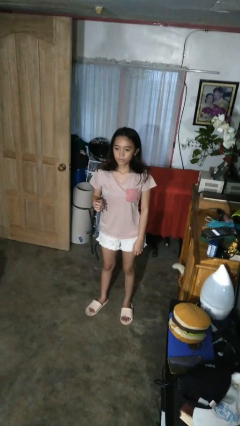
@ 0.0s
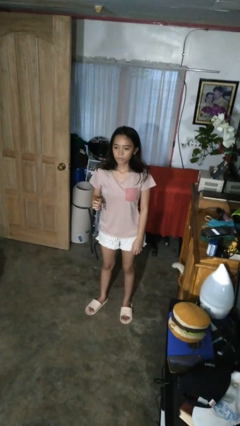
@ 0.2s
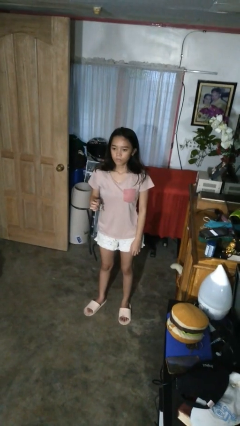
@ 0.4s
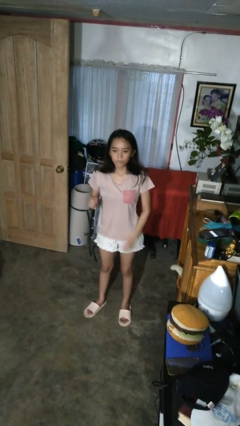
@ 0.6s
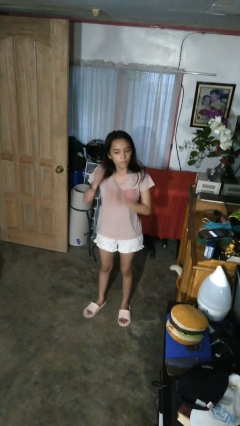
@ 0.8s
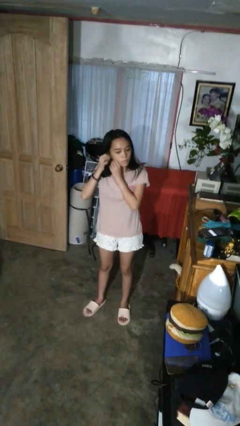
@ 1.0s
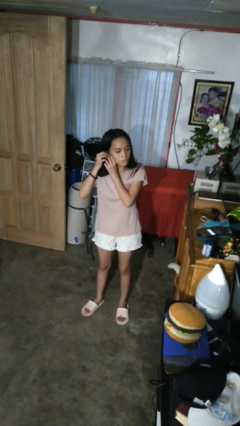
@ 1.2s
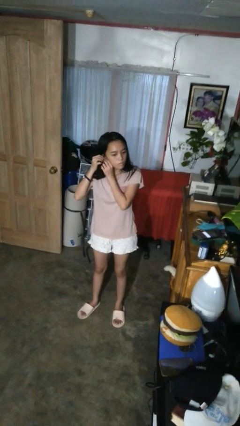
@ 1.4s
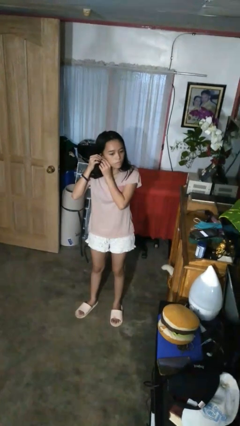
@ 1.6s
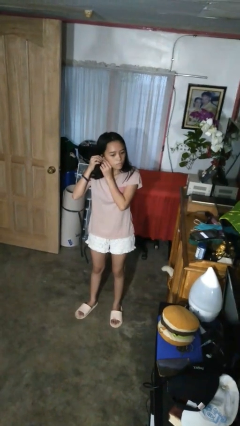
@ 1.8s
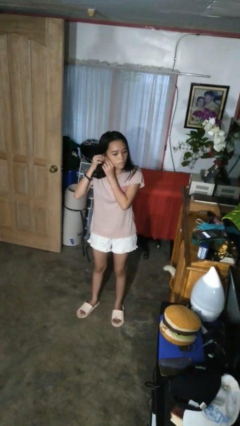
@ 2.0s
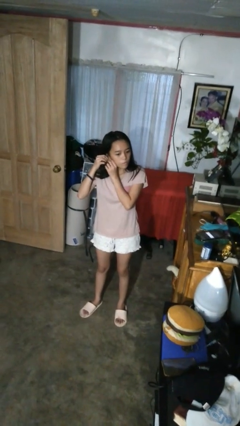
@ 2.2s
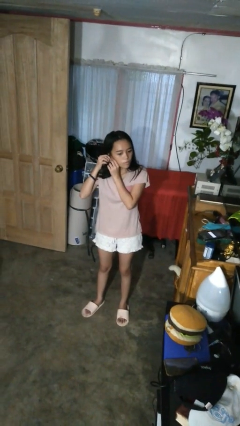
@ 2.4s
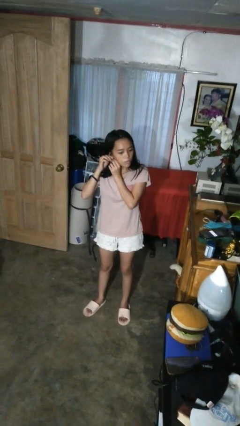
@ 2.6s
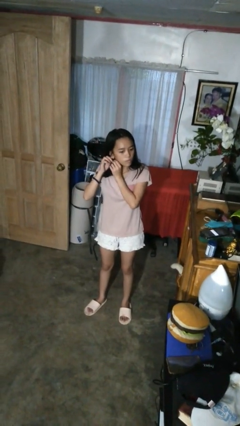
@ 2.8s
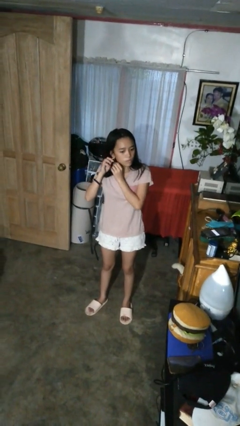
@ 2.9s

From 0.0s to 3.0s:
person puts on earrings

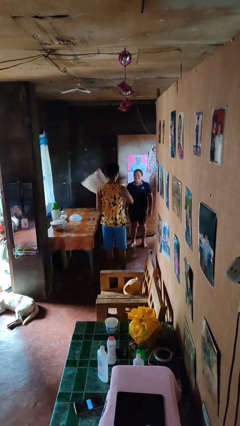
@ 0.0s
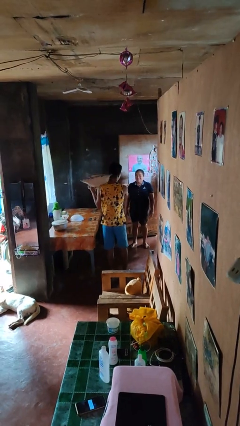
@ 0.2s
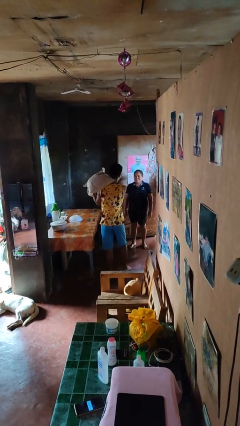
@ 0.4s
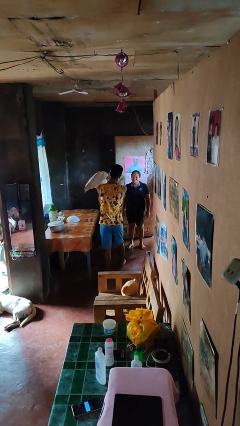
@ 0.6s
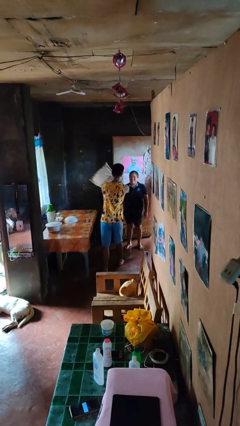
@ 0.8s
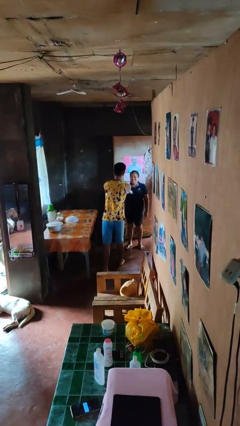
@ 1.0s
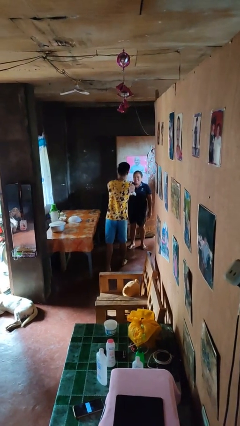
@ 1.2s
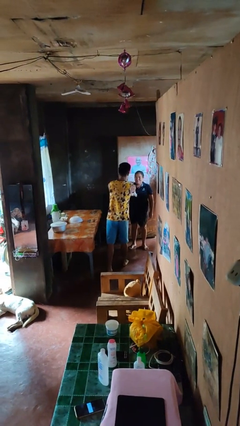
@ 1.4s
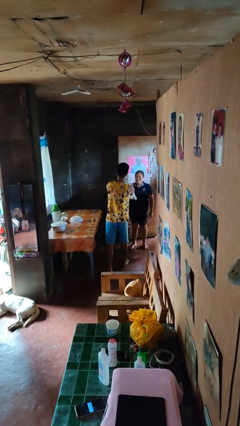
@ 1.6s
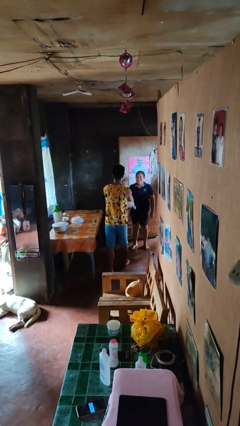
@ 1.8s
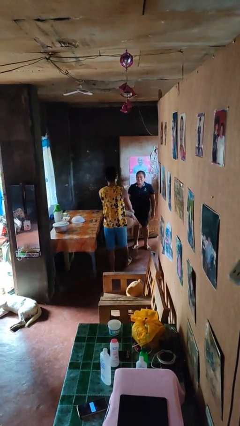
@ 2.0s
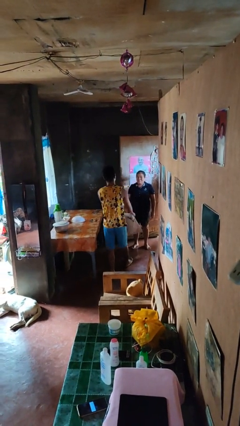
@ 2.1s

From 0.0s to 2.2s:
person hits person with pillow

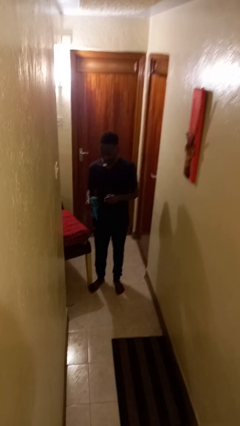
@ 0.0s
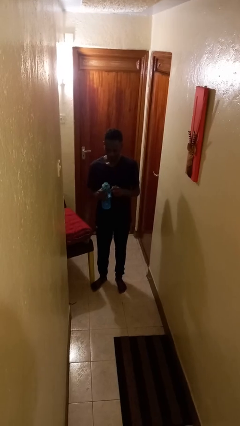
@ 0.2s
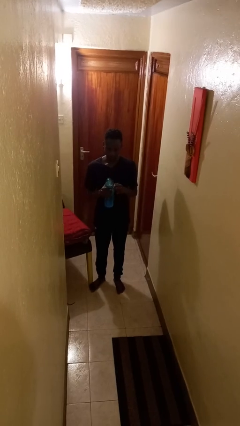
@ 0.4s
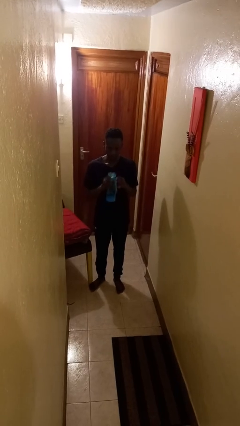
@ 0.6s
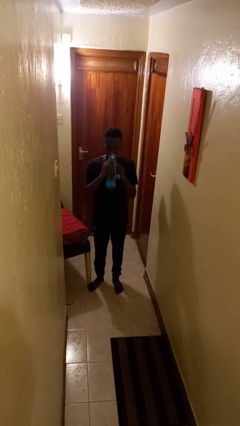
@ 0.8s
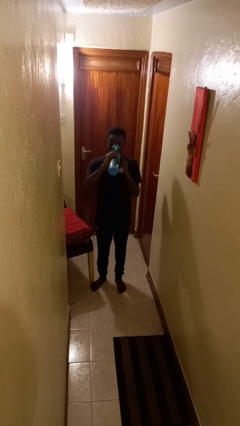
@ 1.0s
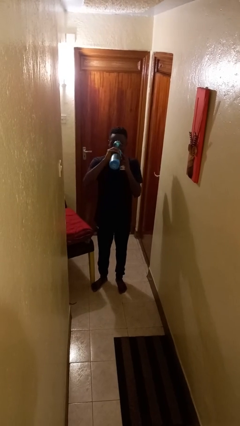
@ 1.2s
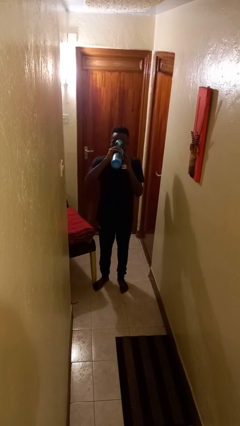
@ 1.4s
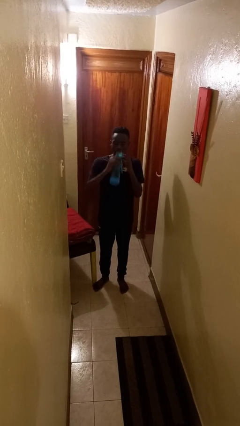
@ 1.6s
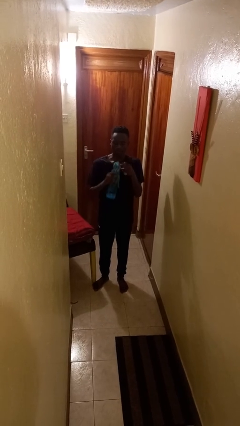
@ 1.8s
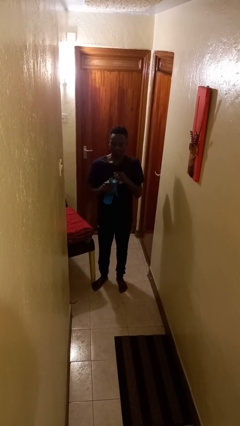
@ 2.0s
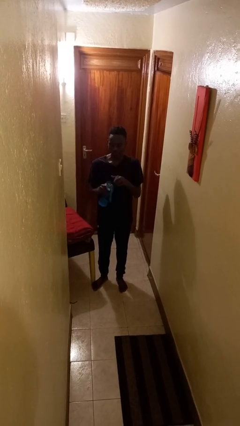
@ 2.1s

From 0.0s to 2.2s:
person drinks from cup

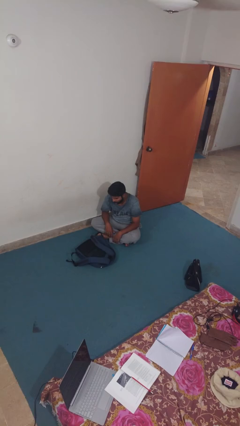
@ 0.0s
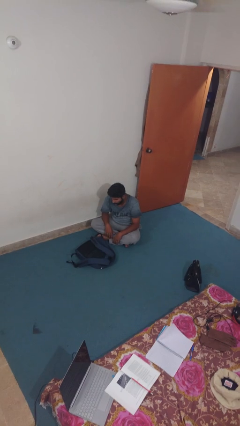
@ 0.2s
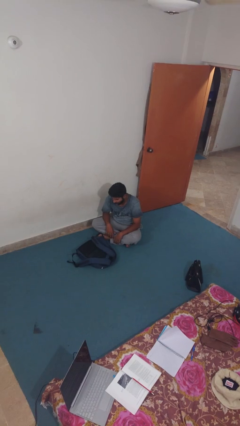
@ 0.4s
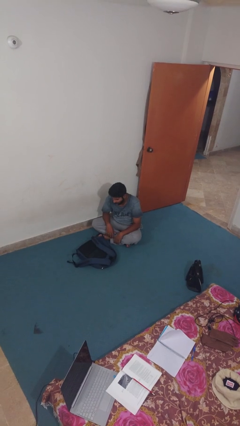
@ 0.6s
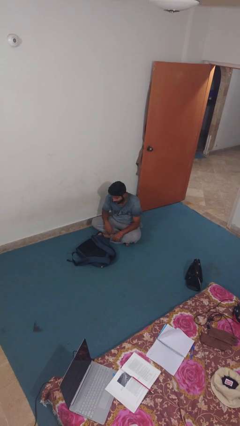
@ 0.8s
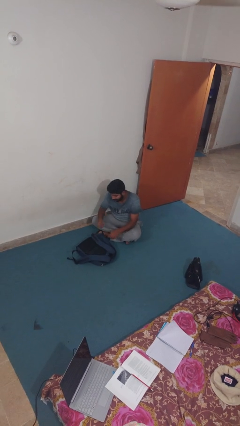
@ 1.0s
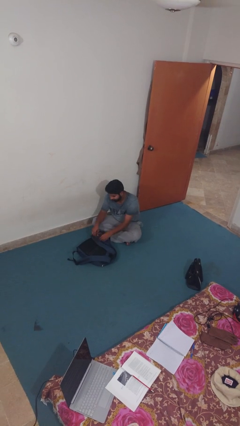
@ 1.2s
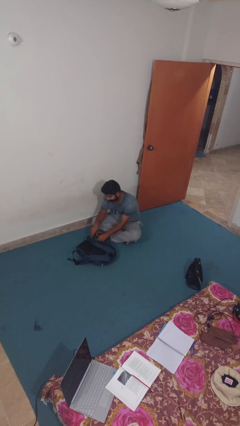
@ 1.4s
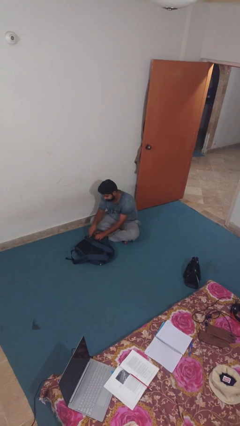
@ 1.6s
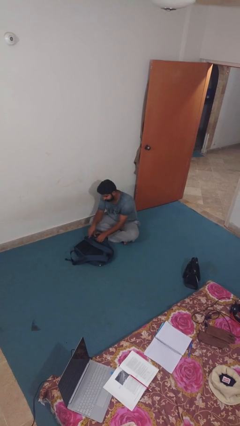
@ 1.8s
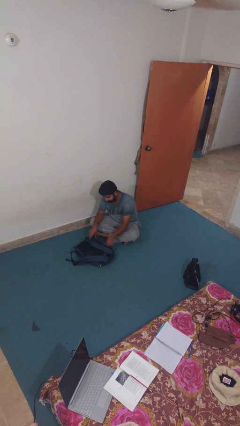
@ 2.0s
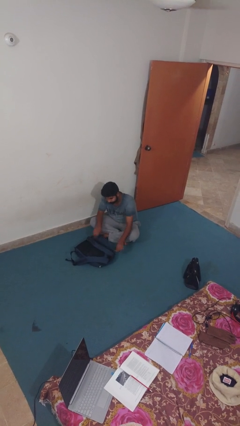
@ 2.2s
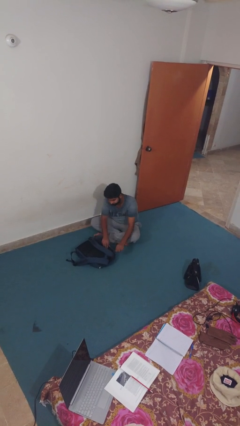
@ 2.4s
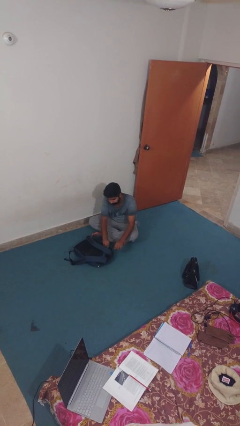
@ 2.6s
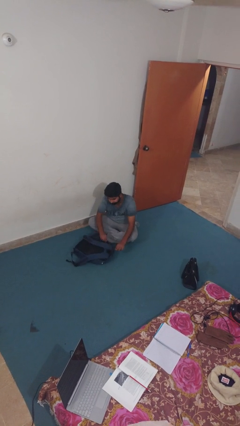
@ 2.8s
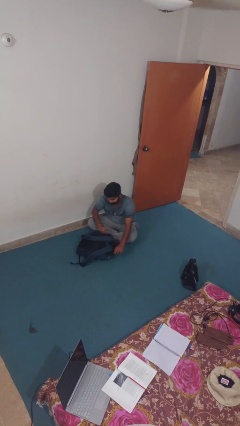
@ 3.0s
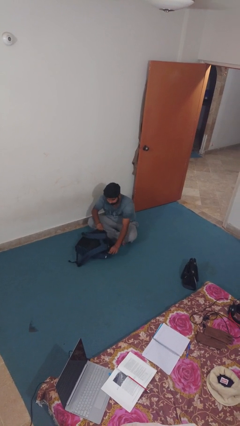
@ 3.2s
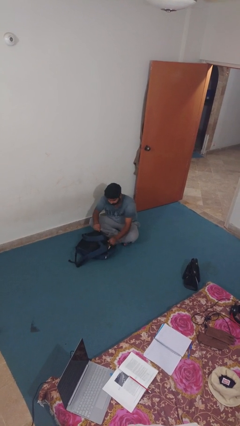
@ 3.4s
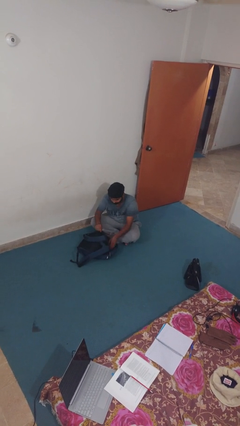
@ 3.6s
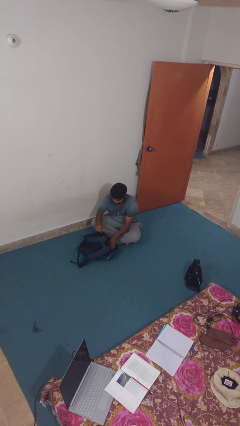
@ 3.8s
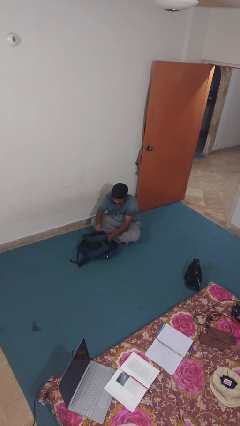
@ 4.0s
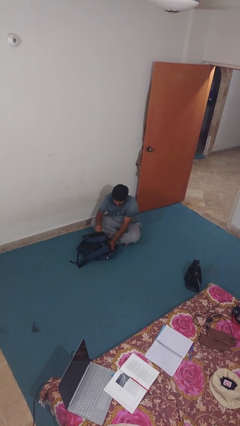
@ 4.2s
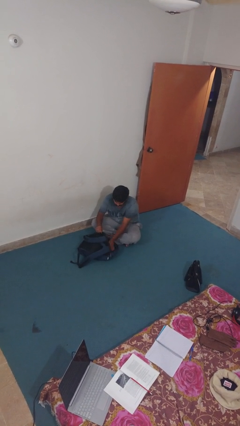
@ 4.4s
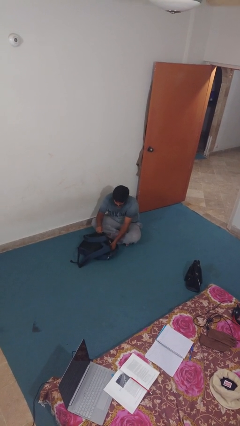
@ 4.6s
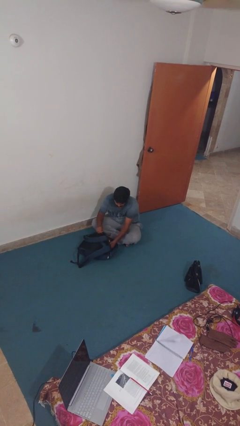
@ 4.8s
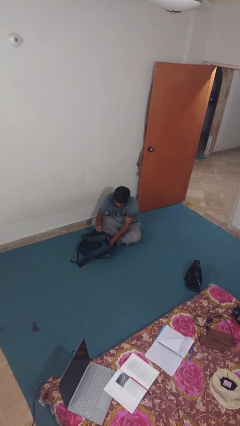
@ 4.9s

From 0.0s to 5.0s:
person searches in backpack

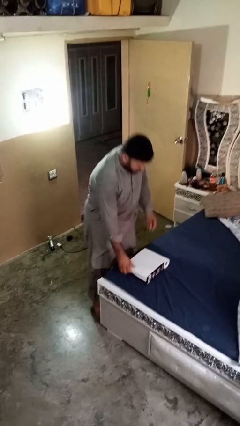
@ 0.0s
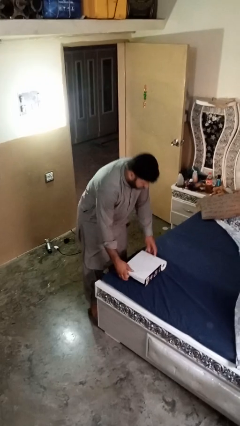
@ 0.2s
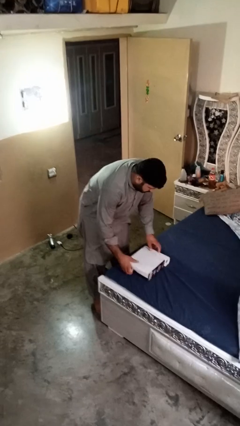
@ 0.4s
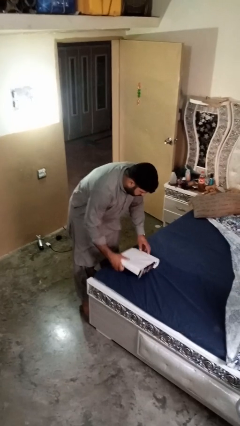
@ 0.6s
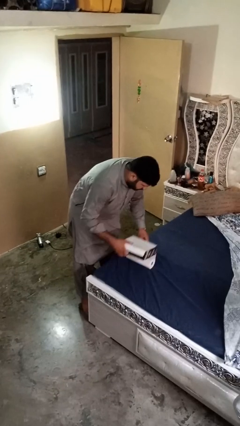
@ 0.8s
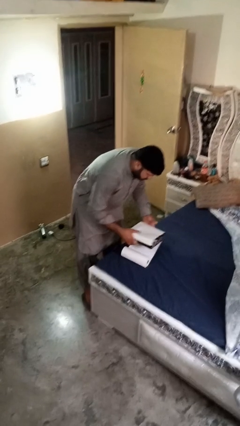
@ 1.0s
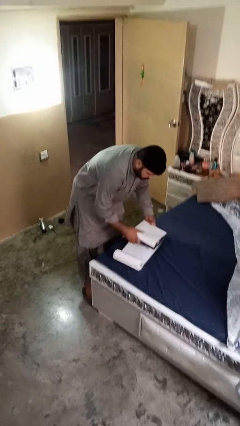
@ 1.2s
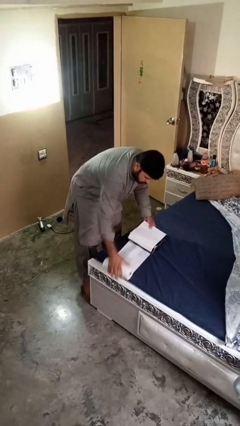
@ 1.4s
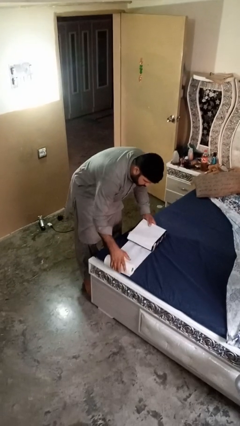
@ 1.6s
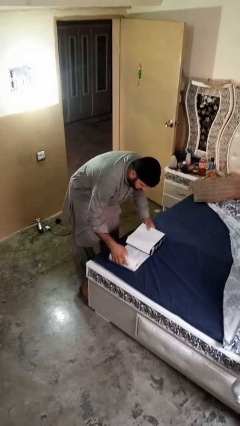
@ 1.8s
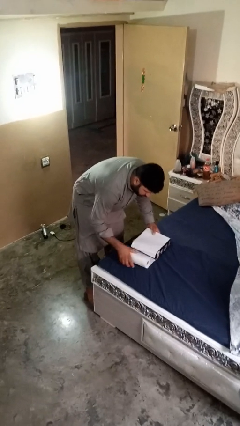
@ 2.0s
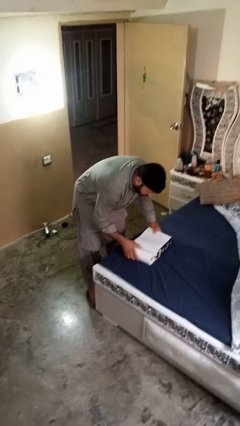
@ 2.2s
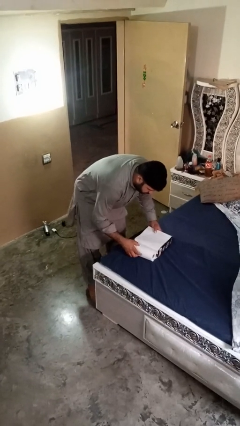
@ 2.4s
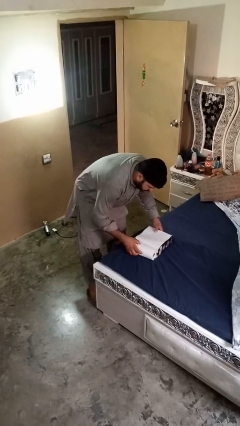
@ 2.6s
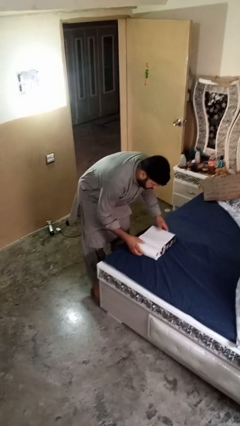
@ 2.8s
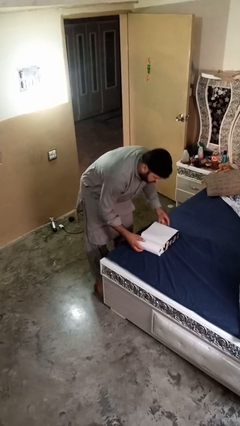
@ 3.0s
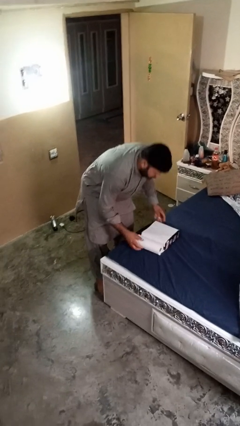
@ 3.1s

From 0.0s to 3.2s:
person wraps box

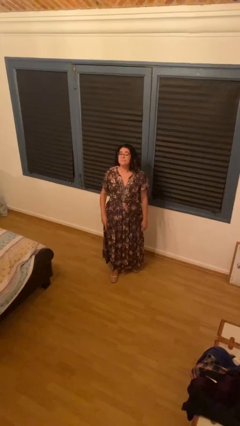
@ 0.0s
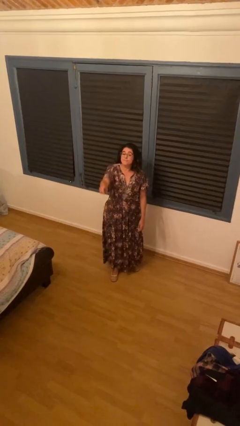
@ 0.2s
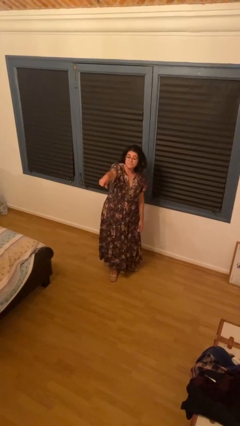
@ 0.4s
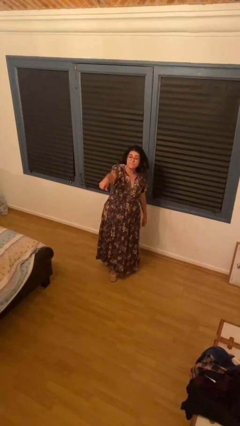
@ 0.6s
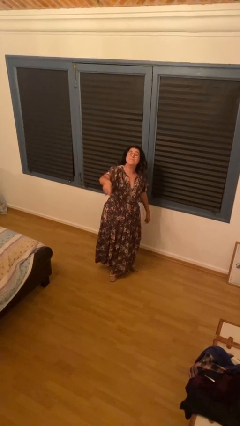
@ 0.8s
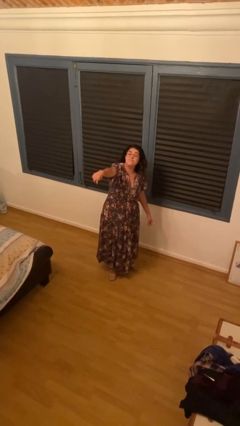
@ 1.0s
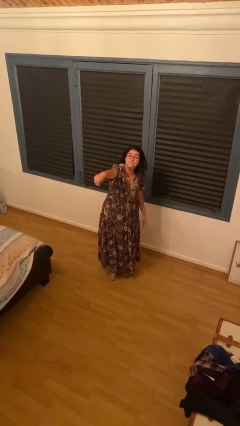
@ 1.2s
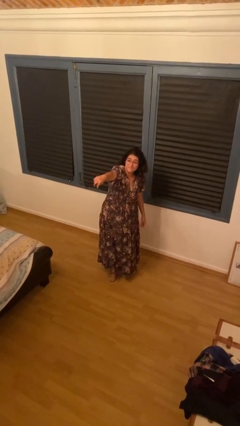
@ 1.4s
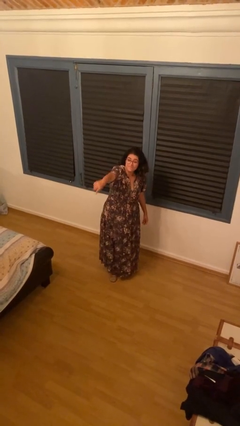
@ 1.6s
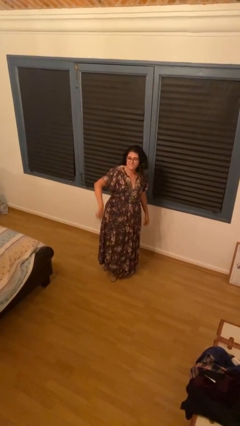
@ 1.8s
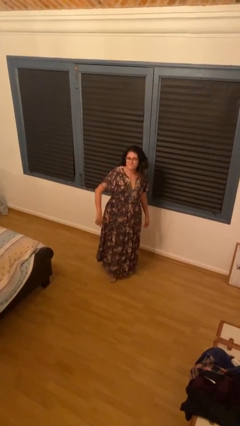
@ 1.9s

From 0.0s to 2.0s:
person points at person
